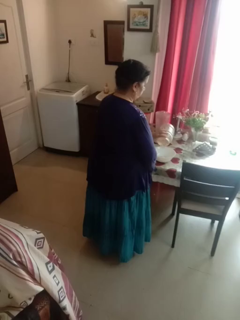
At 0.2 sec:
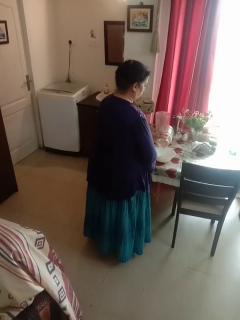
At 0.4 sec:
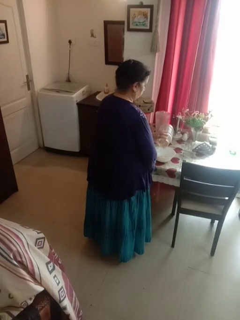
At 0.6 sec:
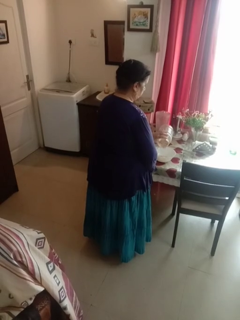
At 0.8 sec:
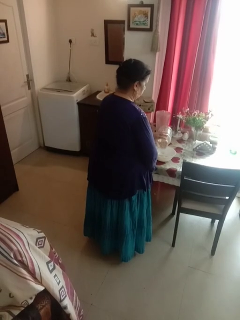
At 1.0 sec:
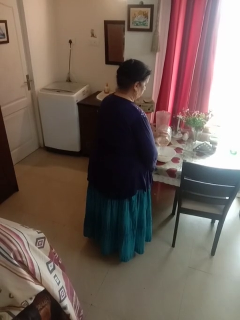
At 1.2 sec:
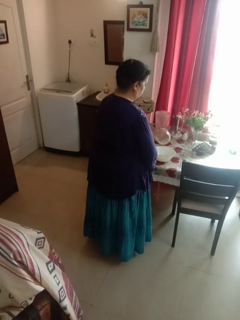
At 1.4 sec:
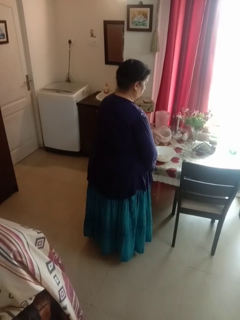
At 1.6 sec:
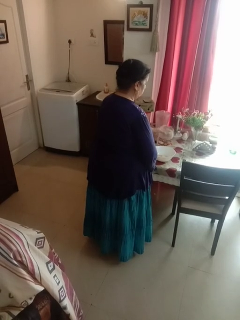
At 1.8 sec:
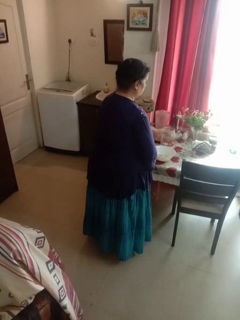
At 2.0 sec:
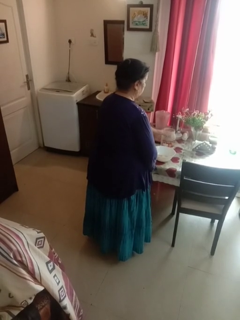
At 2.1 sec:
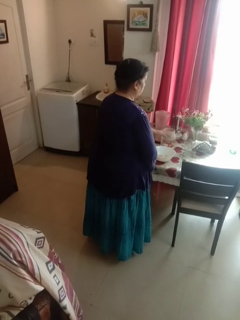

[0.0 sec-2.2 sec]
person pours into bowl

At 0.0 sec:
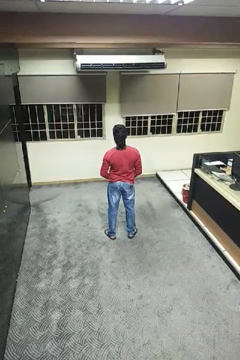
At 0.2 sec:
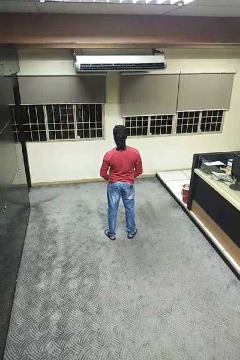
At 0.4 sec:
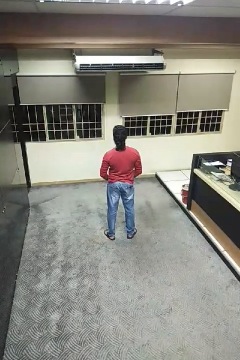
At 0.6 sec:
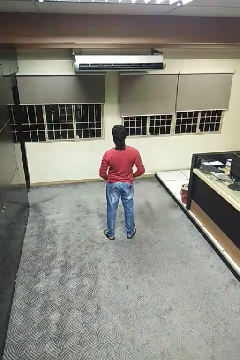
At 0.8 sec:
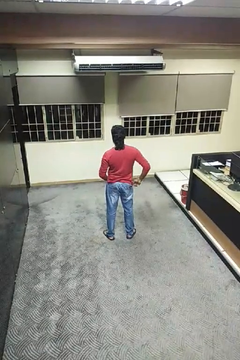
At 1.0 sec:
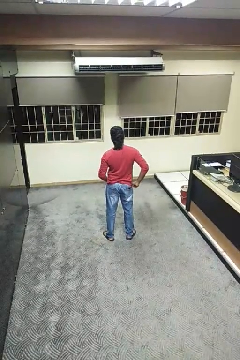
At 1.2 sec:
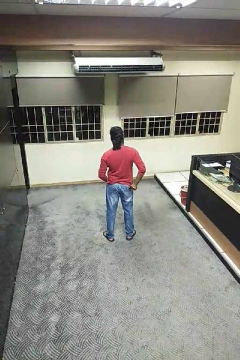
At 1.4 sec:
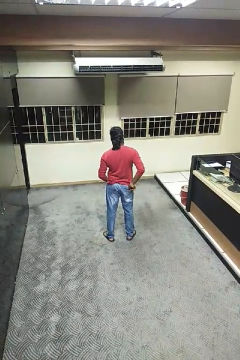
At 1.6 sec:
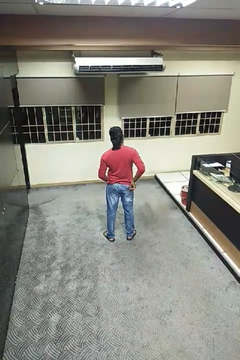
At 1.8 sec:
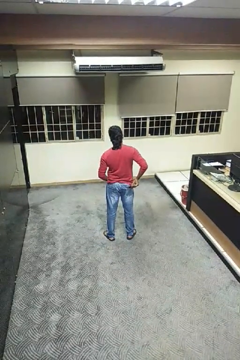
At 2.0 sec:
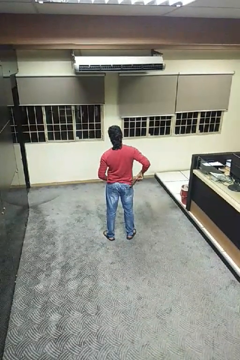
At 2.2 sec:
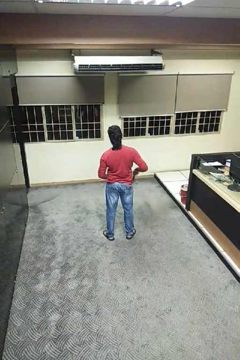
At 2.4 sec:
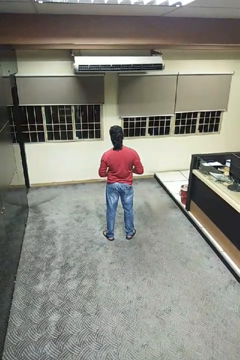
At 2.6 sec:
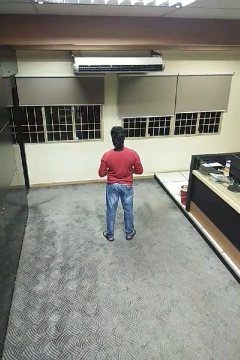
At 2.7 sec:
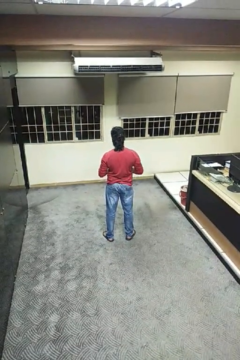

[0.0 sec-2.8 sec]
person takes phone from pocket

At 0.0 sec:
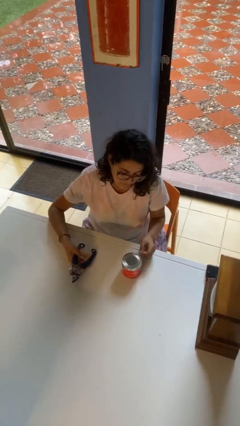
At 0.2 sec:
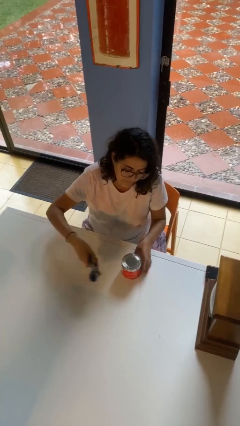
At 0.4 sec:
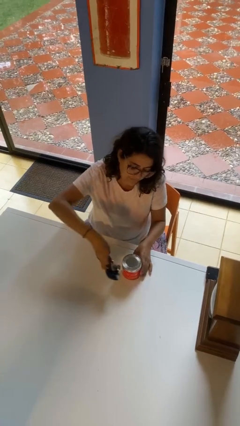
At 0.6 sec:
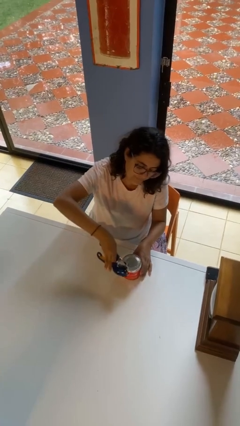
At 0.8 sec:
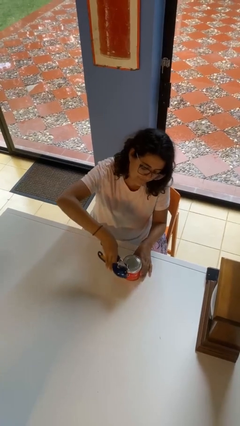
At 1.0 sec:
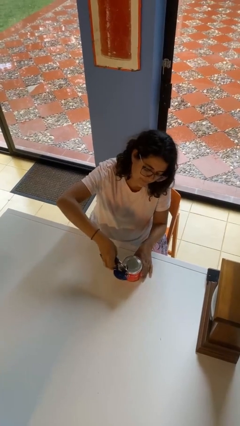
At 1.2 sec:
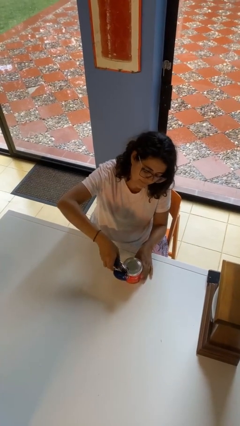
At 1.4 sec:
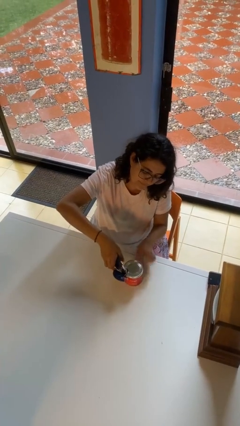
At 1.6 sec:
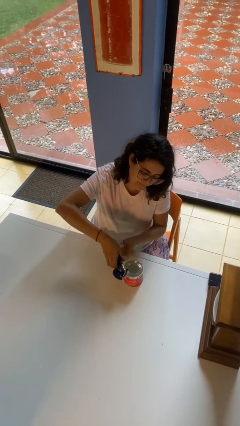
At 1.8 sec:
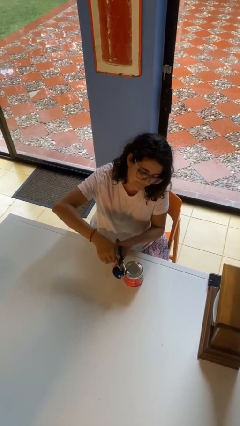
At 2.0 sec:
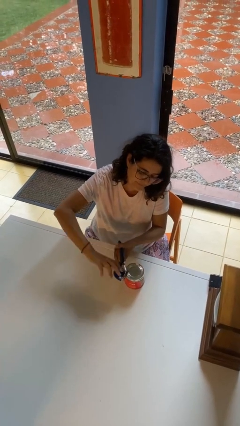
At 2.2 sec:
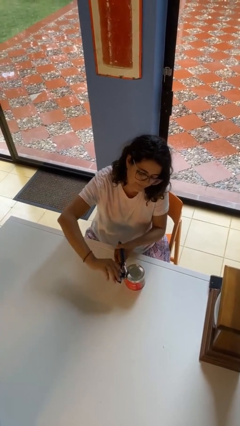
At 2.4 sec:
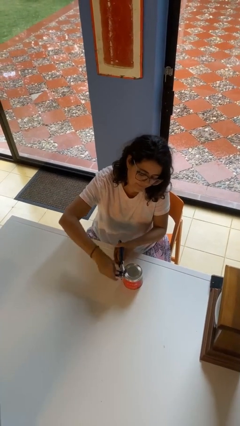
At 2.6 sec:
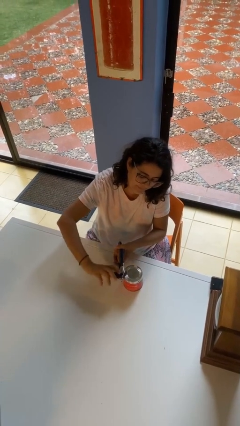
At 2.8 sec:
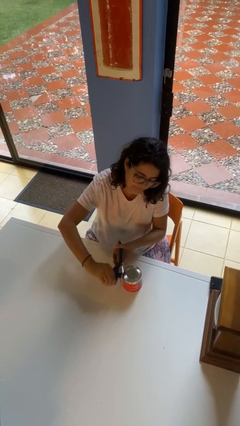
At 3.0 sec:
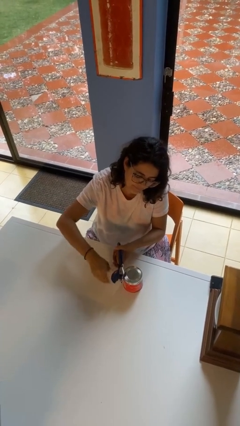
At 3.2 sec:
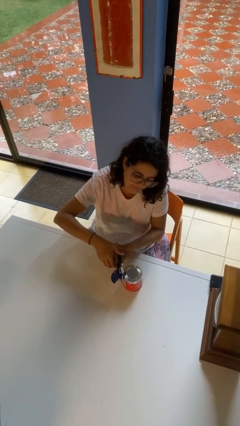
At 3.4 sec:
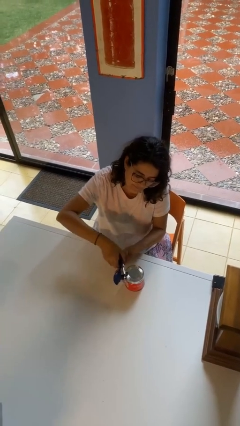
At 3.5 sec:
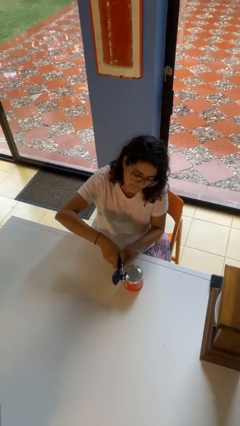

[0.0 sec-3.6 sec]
person opens can with can opener

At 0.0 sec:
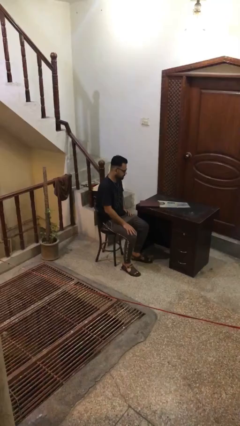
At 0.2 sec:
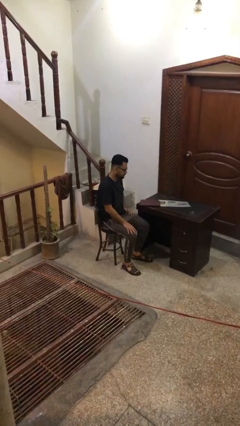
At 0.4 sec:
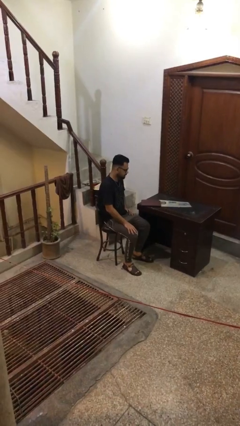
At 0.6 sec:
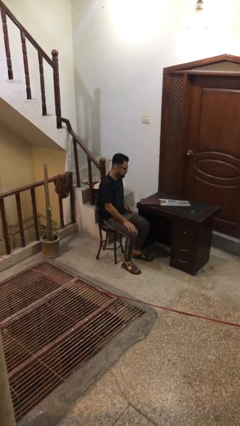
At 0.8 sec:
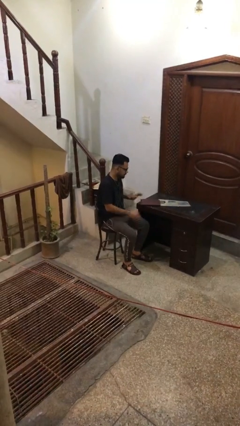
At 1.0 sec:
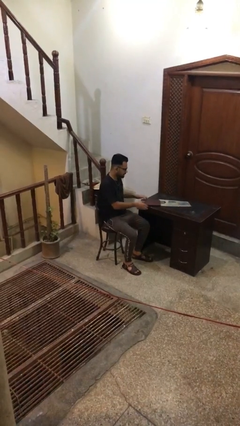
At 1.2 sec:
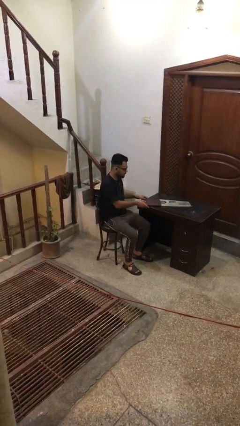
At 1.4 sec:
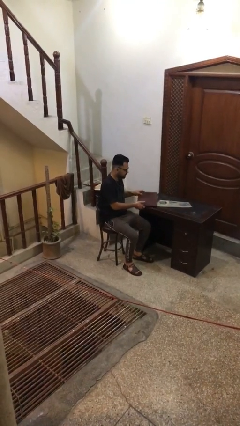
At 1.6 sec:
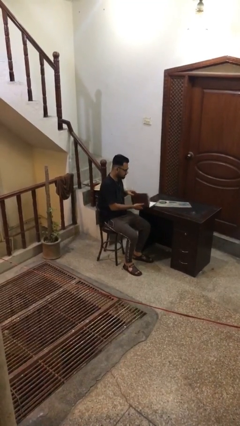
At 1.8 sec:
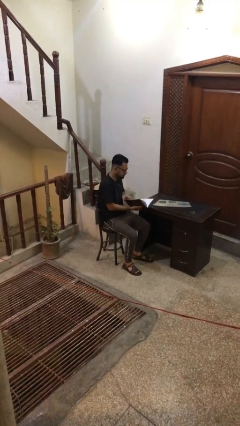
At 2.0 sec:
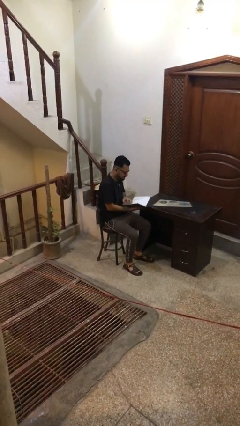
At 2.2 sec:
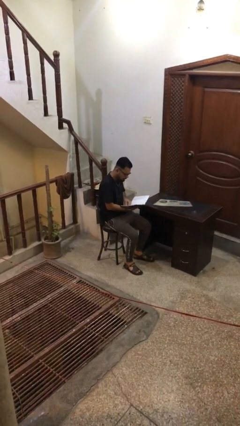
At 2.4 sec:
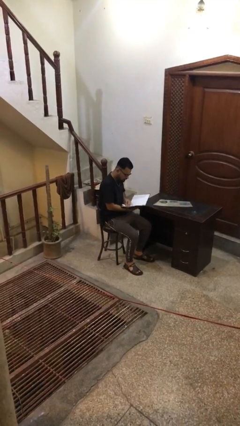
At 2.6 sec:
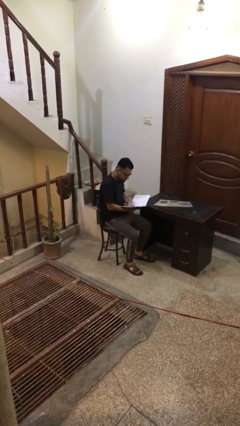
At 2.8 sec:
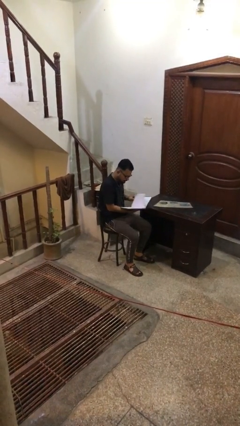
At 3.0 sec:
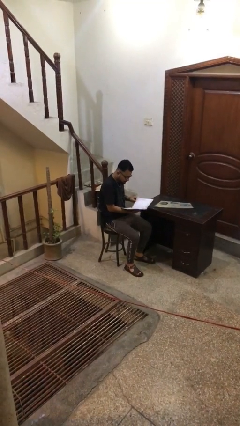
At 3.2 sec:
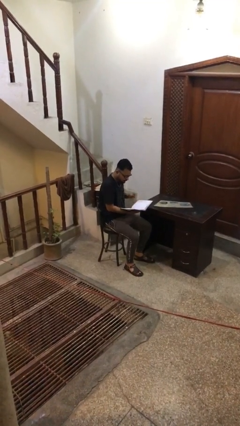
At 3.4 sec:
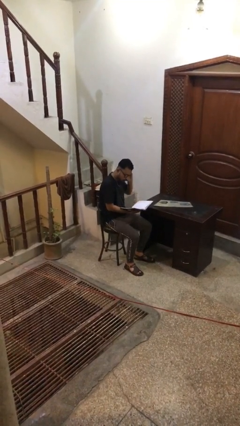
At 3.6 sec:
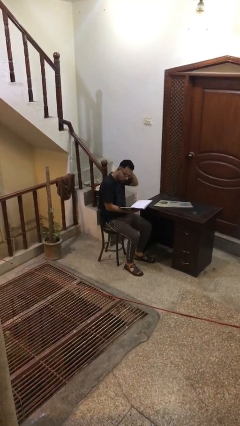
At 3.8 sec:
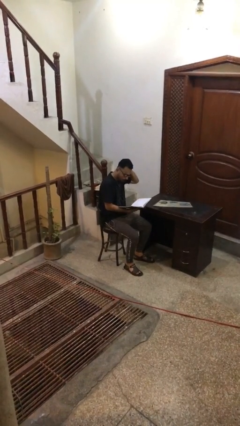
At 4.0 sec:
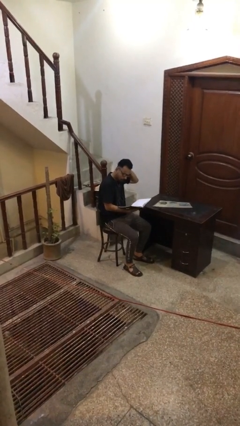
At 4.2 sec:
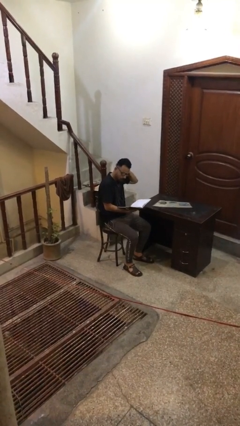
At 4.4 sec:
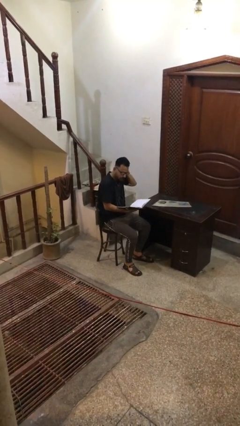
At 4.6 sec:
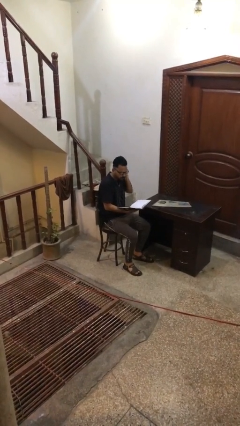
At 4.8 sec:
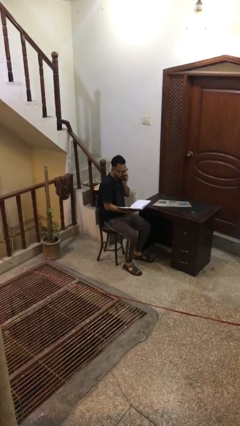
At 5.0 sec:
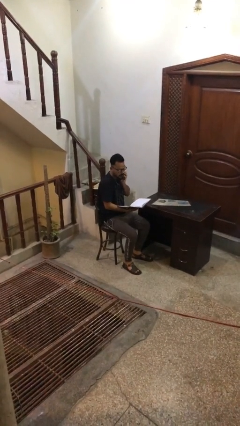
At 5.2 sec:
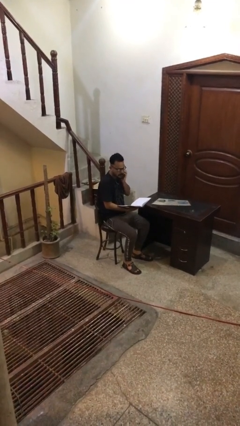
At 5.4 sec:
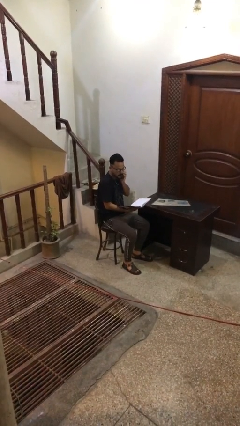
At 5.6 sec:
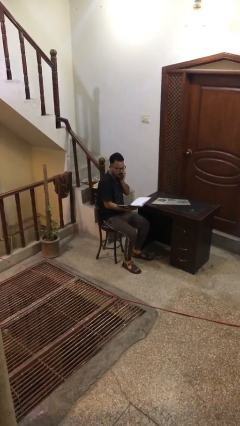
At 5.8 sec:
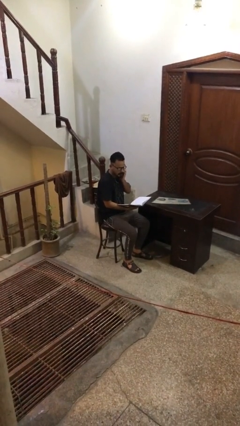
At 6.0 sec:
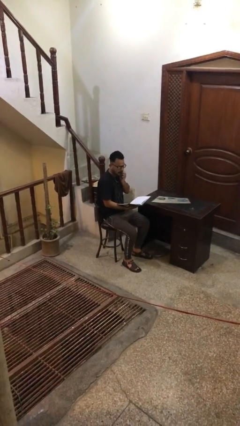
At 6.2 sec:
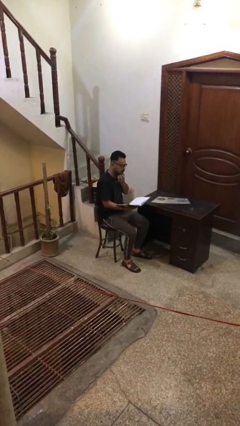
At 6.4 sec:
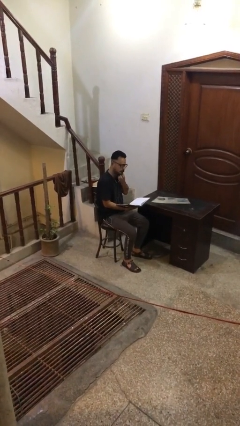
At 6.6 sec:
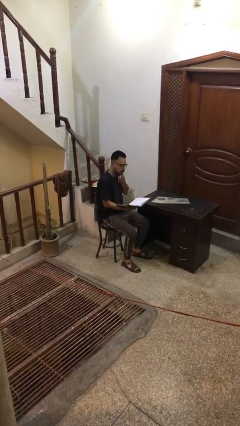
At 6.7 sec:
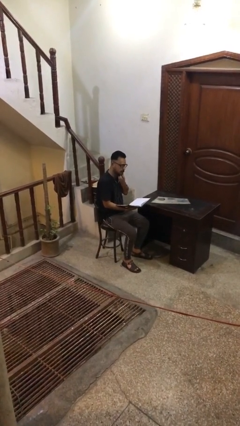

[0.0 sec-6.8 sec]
person reads document

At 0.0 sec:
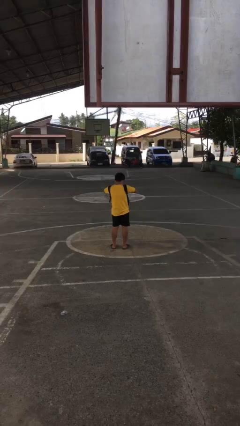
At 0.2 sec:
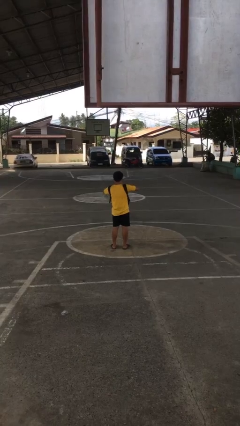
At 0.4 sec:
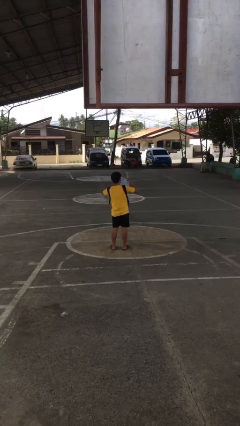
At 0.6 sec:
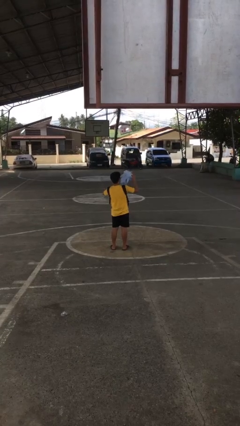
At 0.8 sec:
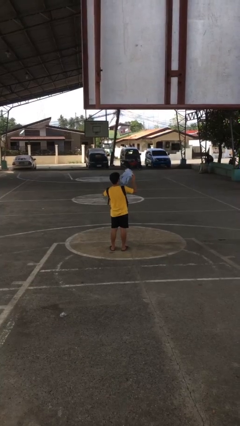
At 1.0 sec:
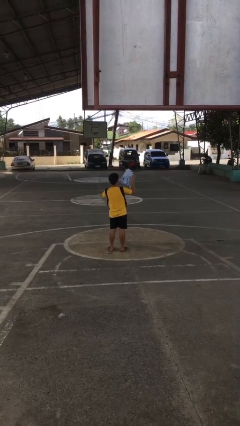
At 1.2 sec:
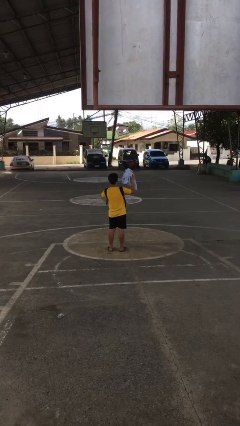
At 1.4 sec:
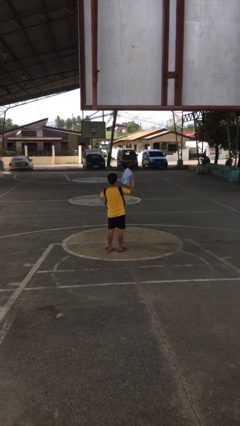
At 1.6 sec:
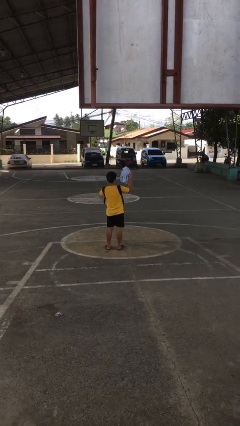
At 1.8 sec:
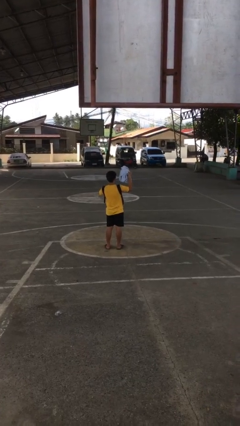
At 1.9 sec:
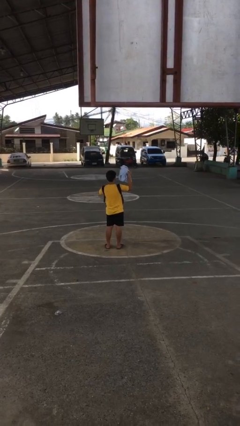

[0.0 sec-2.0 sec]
person takes object from backpack

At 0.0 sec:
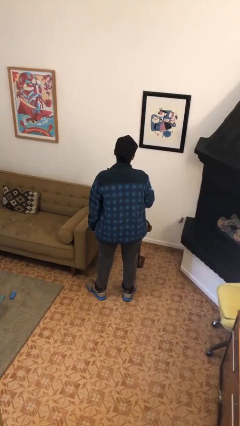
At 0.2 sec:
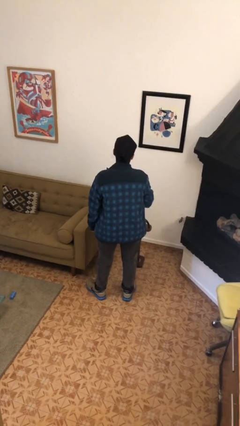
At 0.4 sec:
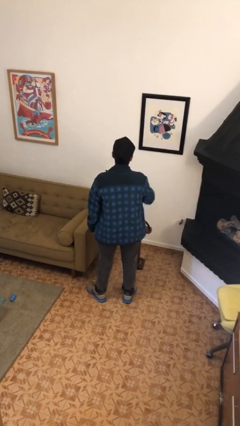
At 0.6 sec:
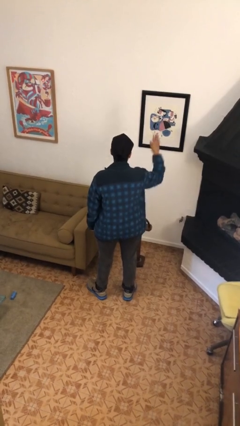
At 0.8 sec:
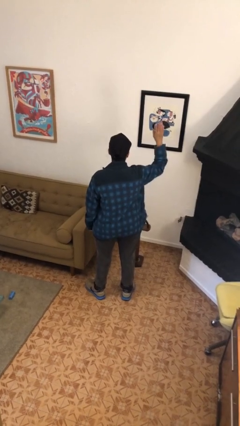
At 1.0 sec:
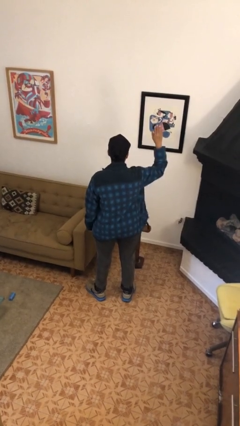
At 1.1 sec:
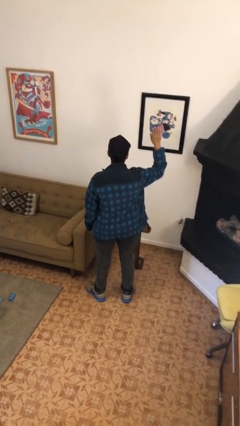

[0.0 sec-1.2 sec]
person gestures raise hand
